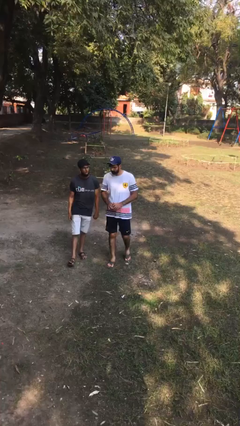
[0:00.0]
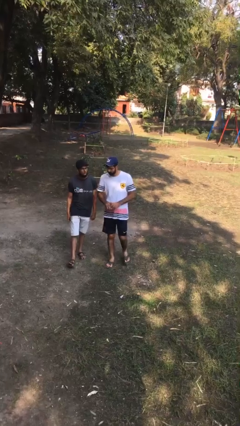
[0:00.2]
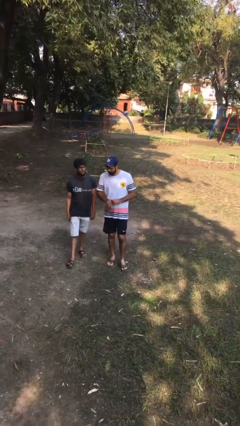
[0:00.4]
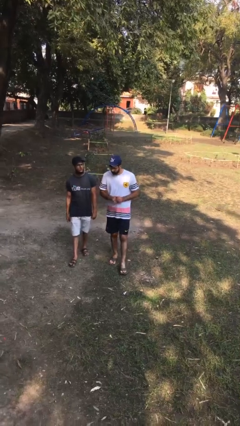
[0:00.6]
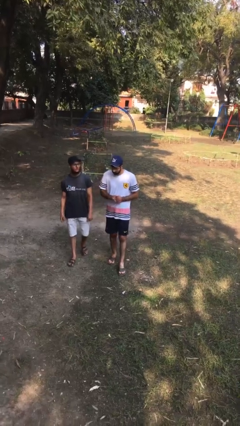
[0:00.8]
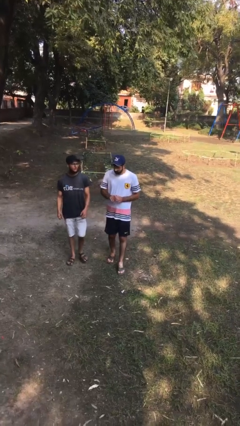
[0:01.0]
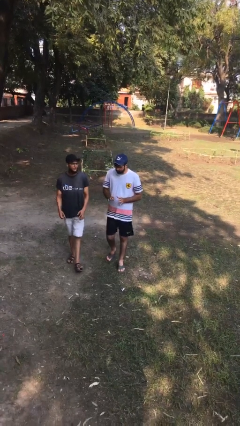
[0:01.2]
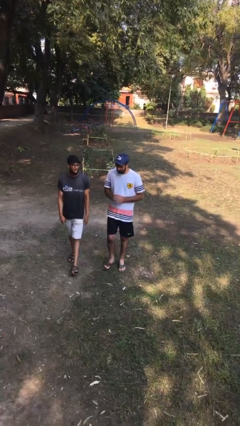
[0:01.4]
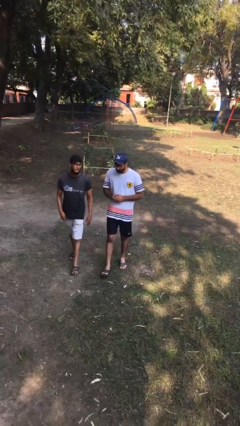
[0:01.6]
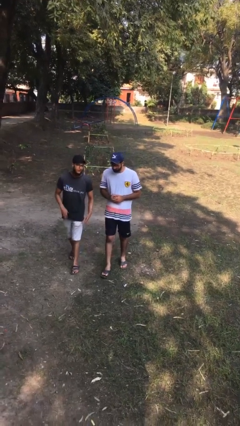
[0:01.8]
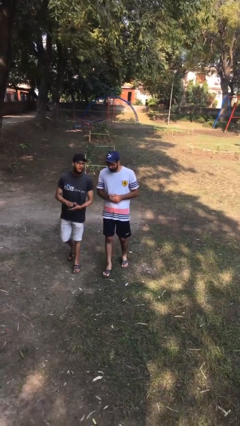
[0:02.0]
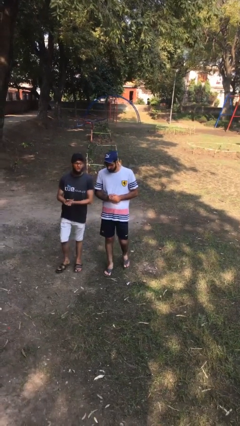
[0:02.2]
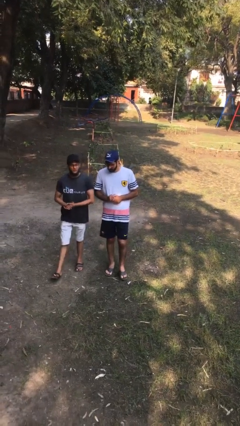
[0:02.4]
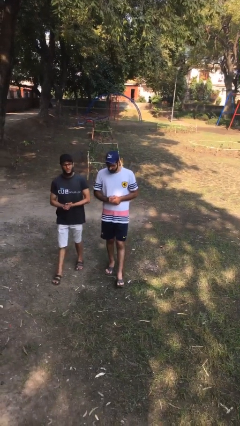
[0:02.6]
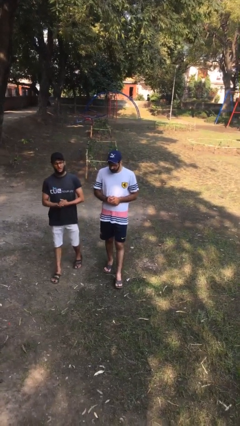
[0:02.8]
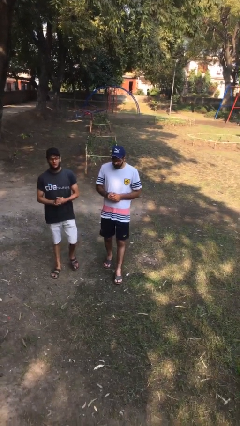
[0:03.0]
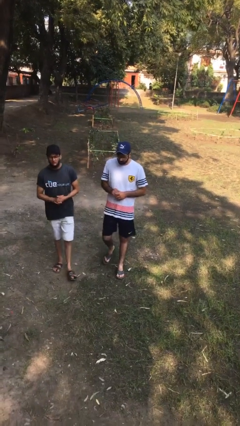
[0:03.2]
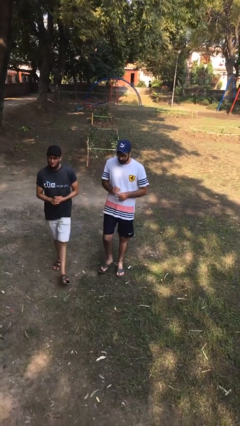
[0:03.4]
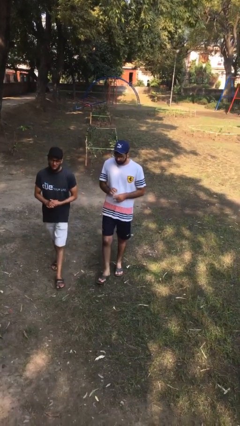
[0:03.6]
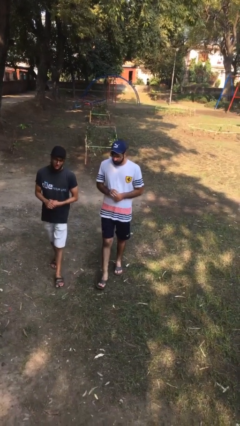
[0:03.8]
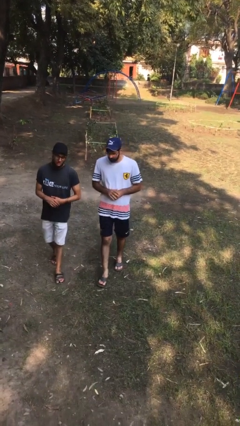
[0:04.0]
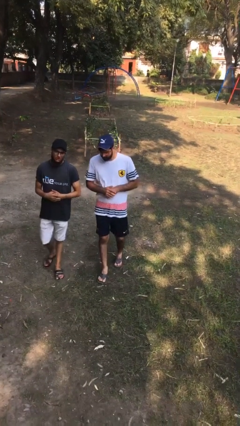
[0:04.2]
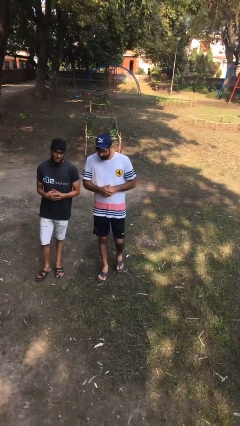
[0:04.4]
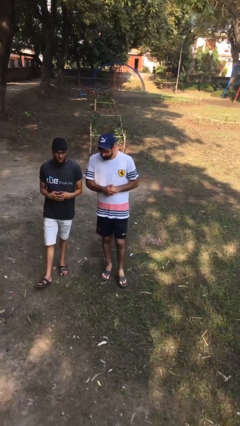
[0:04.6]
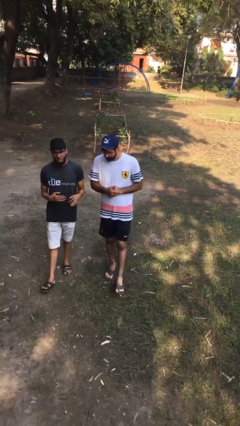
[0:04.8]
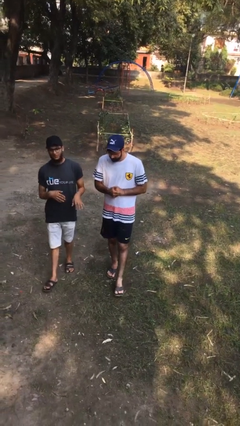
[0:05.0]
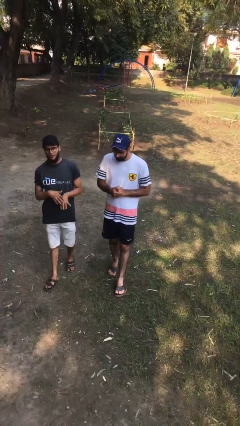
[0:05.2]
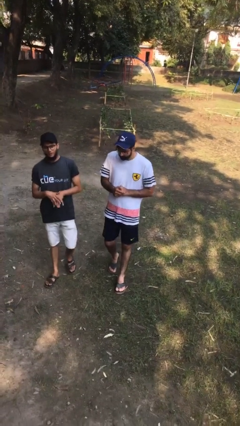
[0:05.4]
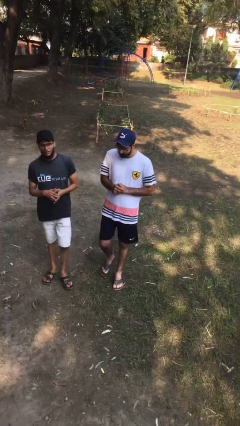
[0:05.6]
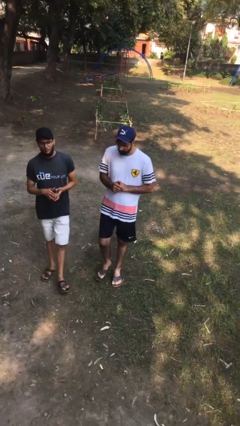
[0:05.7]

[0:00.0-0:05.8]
person talks to person

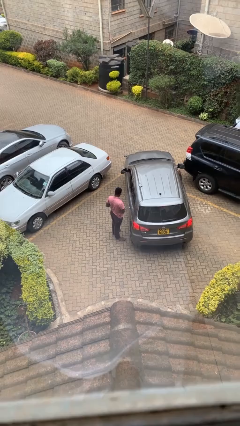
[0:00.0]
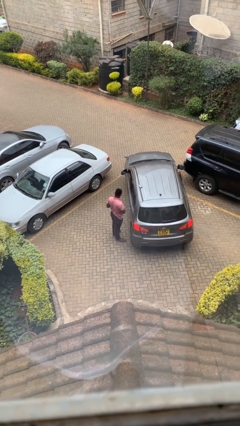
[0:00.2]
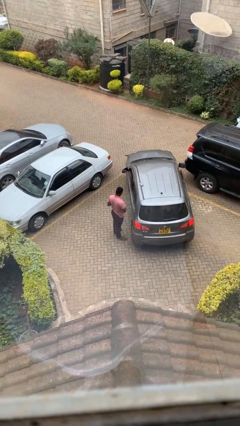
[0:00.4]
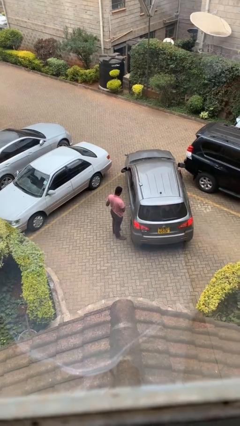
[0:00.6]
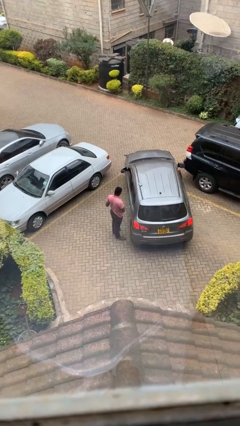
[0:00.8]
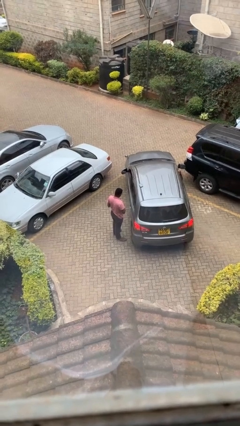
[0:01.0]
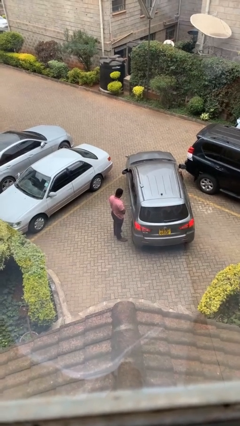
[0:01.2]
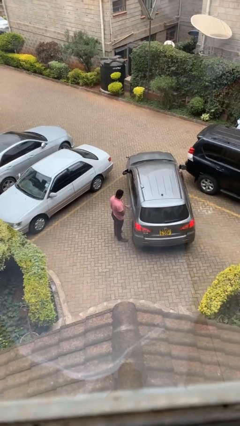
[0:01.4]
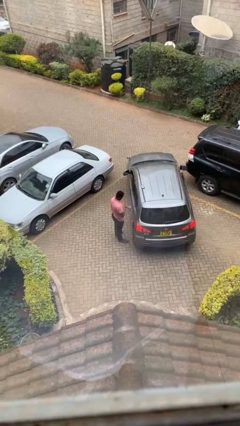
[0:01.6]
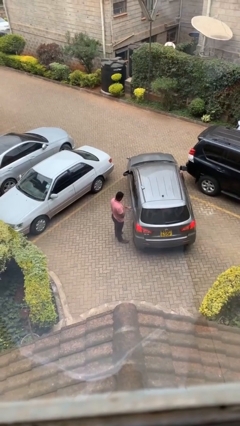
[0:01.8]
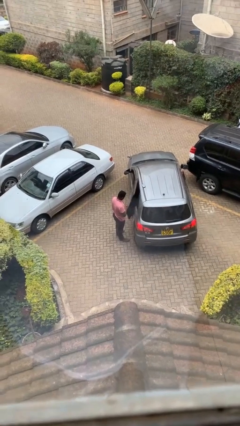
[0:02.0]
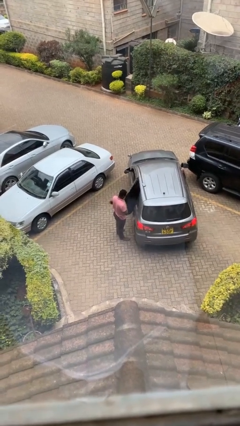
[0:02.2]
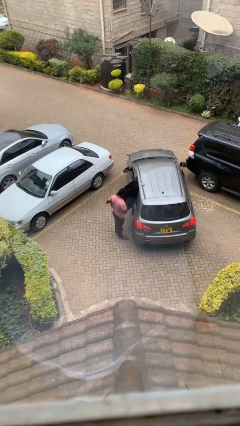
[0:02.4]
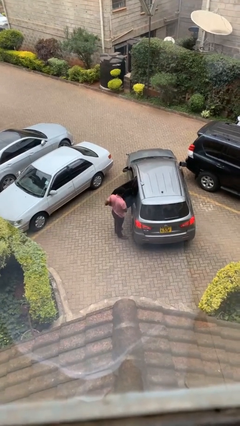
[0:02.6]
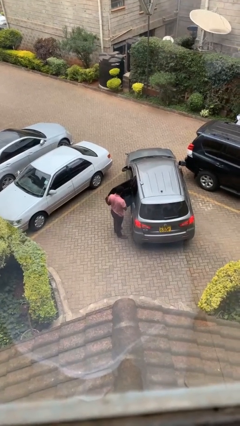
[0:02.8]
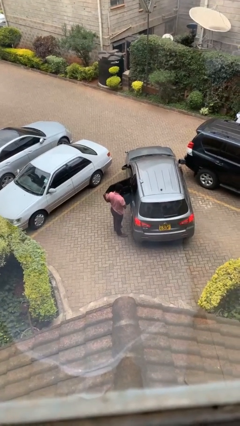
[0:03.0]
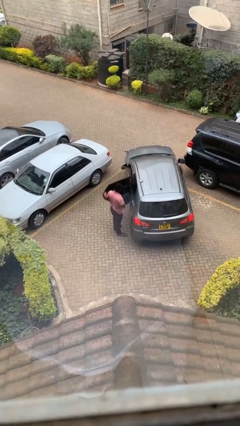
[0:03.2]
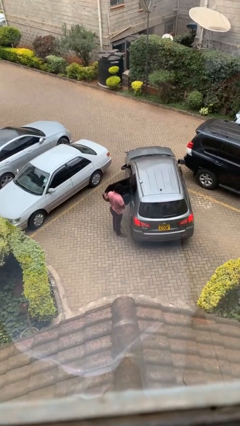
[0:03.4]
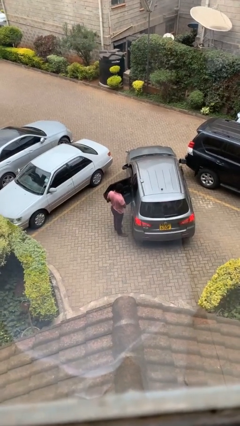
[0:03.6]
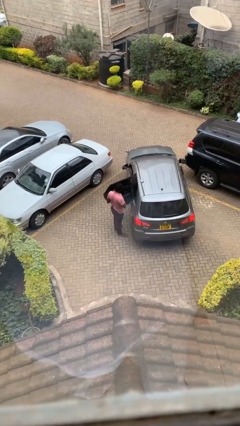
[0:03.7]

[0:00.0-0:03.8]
person opens car door

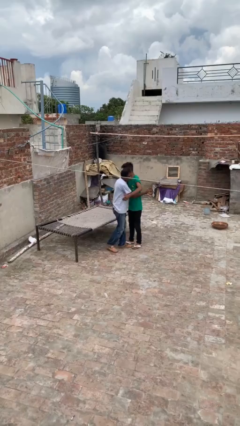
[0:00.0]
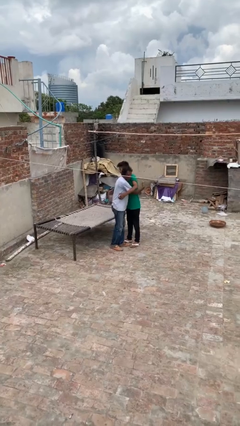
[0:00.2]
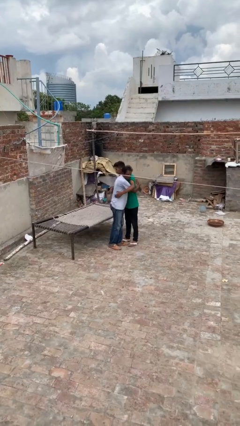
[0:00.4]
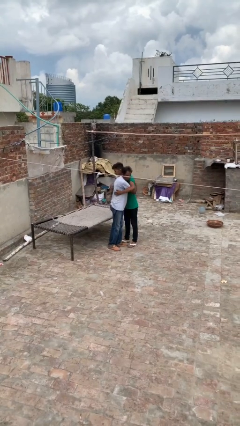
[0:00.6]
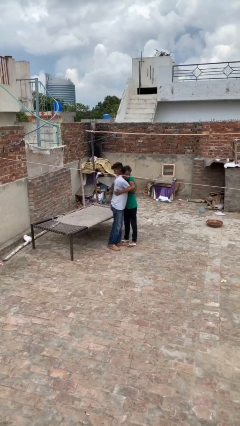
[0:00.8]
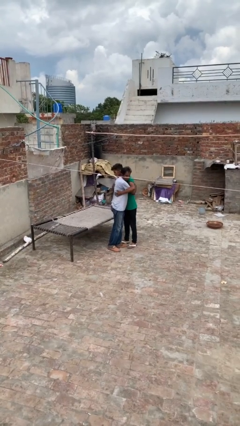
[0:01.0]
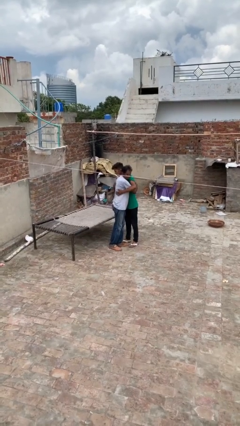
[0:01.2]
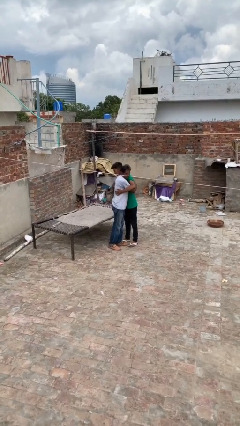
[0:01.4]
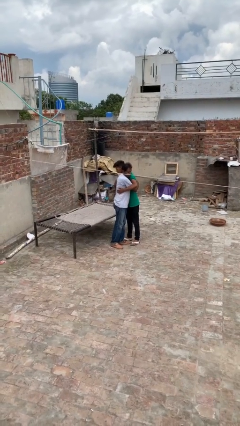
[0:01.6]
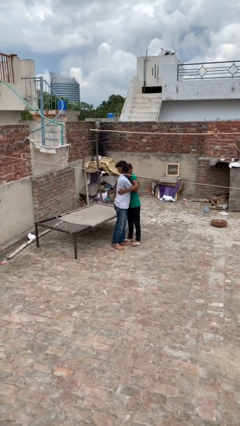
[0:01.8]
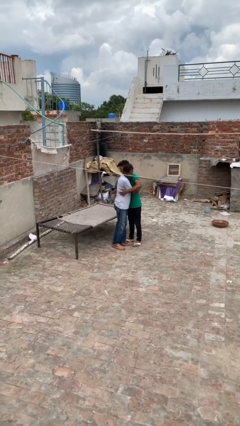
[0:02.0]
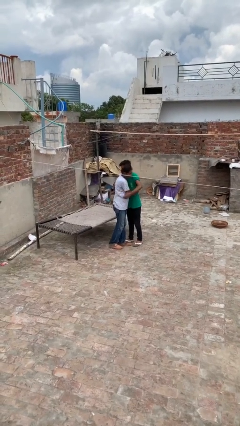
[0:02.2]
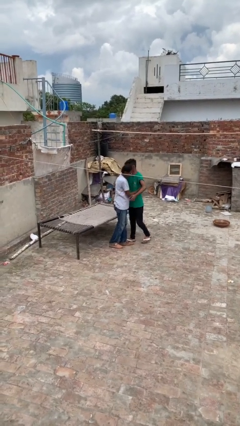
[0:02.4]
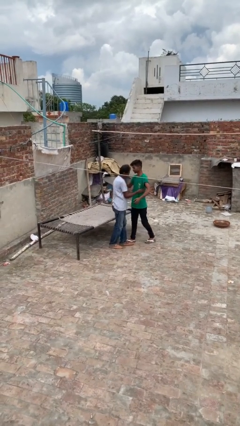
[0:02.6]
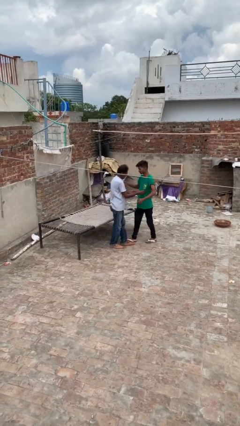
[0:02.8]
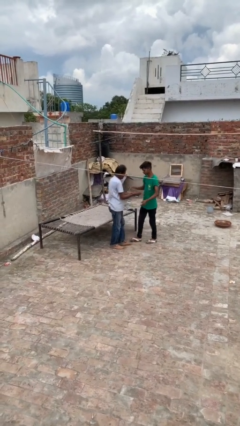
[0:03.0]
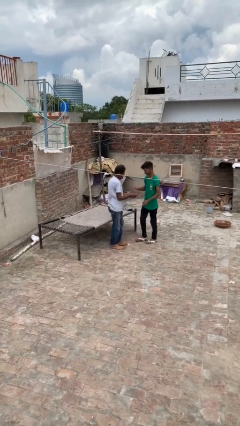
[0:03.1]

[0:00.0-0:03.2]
person embraces person

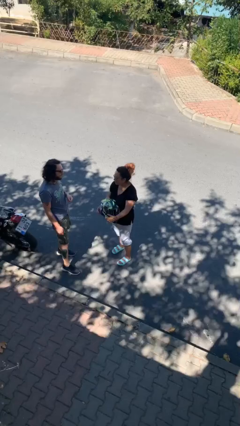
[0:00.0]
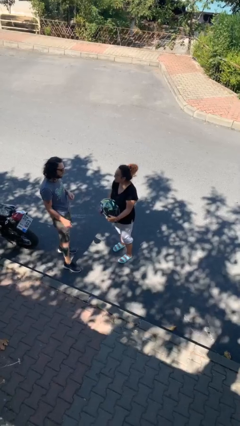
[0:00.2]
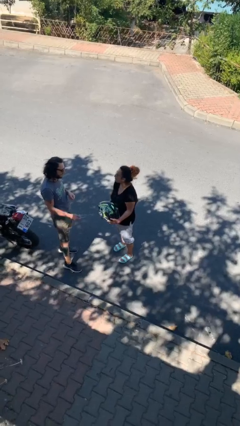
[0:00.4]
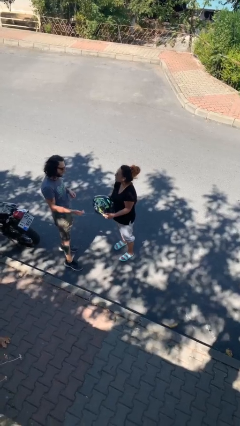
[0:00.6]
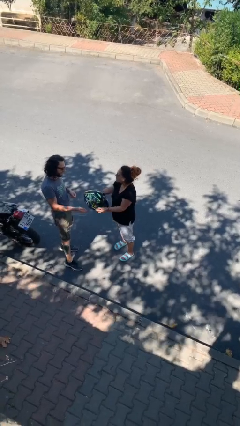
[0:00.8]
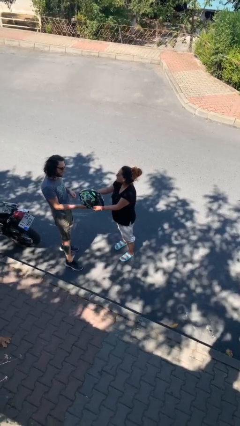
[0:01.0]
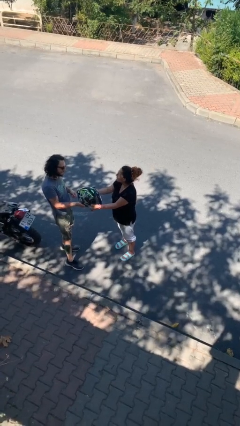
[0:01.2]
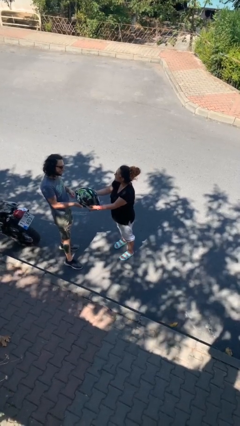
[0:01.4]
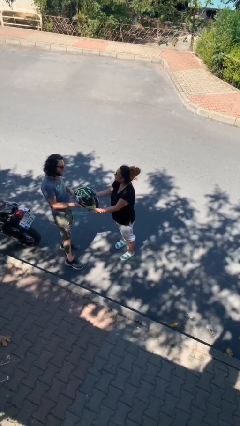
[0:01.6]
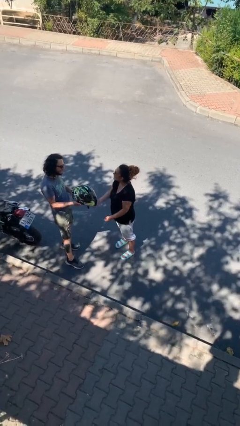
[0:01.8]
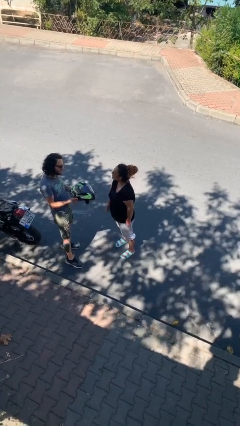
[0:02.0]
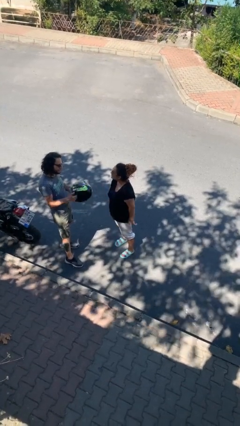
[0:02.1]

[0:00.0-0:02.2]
person transfers object to person

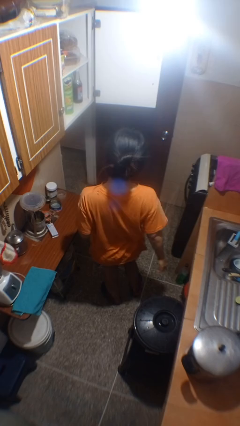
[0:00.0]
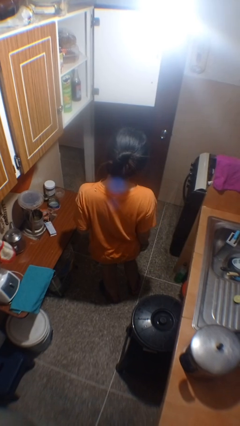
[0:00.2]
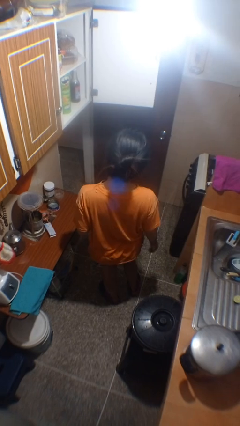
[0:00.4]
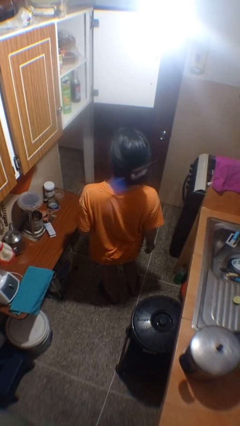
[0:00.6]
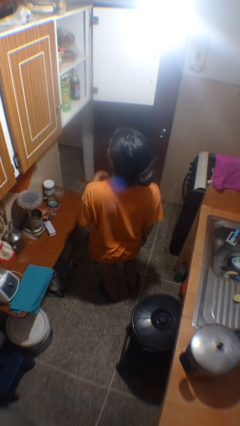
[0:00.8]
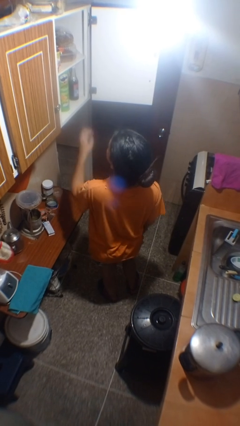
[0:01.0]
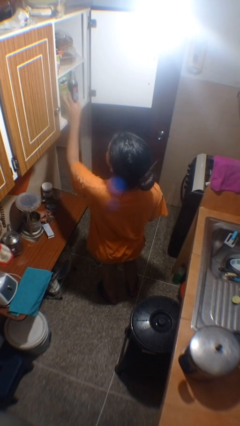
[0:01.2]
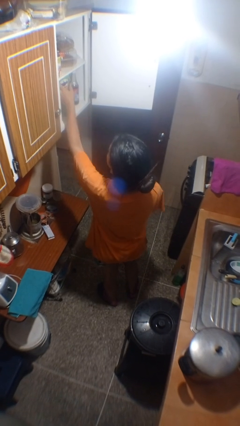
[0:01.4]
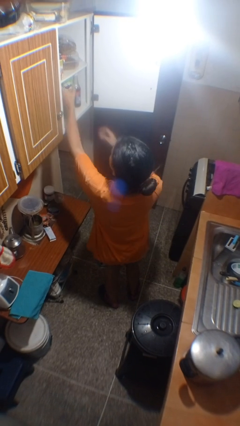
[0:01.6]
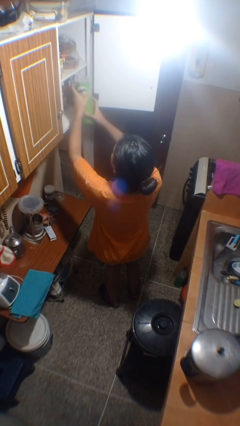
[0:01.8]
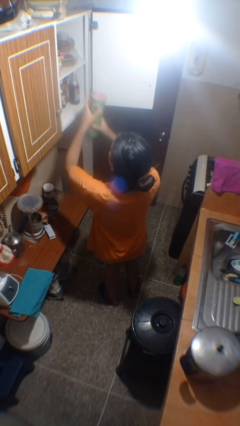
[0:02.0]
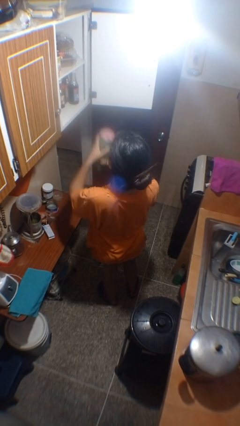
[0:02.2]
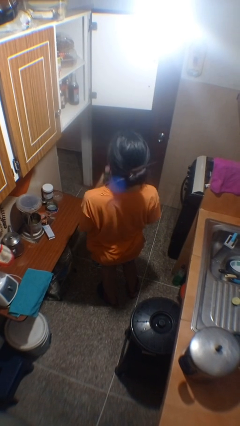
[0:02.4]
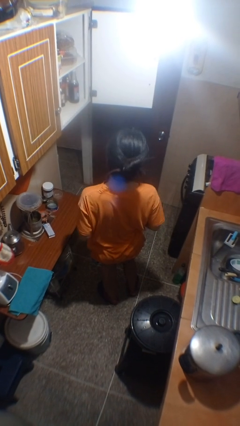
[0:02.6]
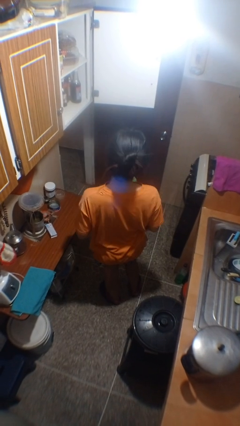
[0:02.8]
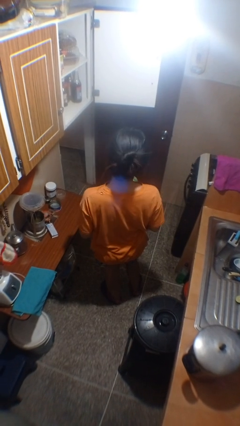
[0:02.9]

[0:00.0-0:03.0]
person takes object from cabinet
